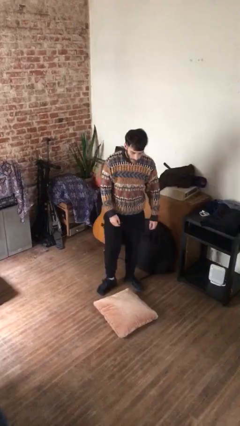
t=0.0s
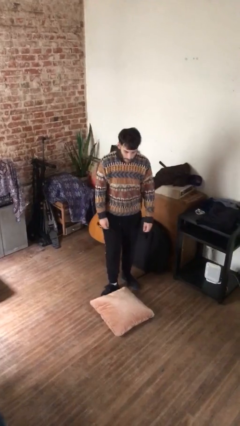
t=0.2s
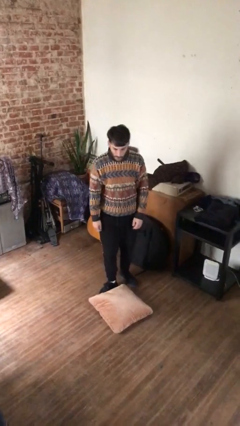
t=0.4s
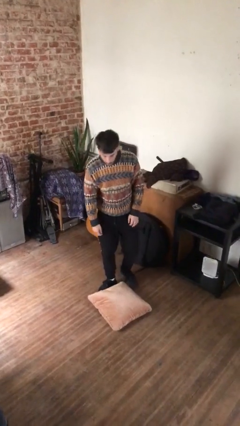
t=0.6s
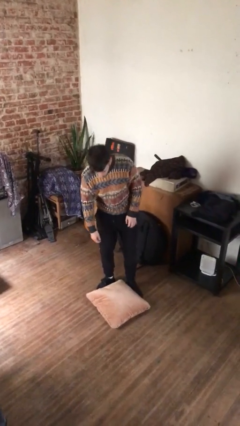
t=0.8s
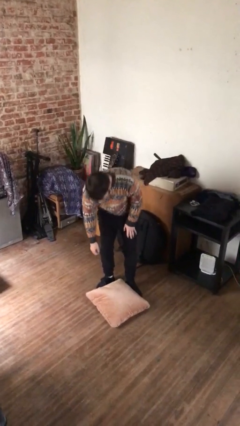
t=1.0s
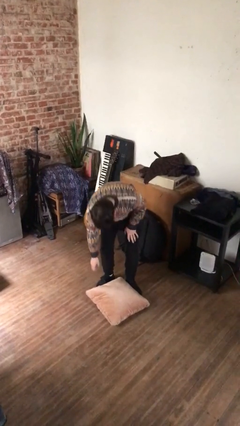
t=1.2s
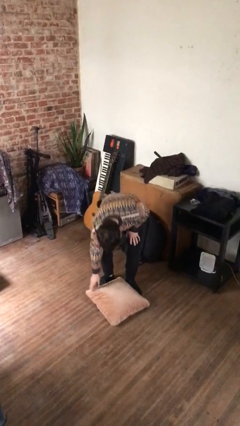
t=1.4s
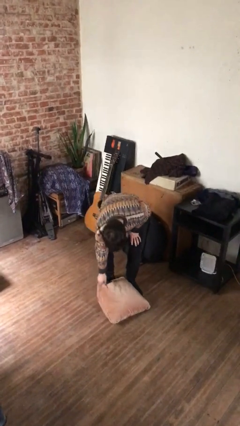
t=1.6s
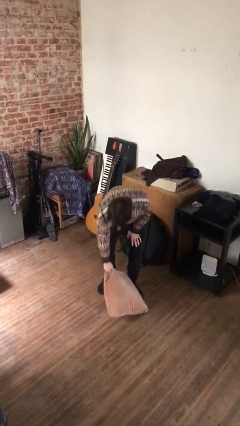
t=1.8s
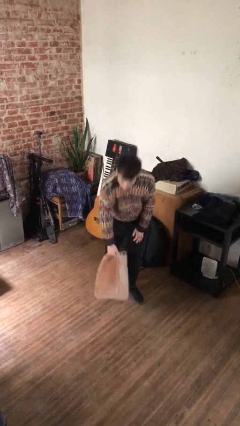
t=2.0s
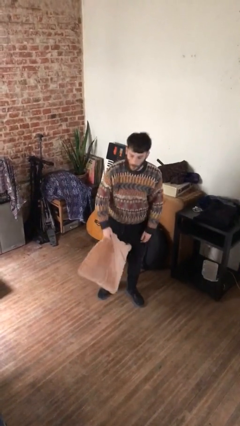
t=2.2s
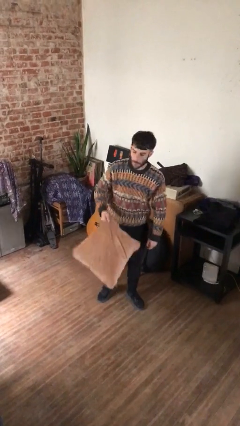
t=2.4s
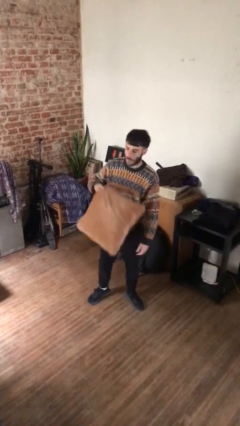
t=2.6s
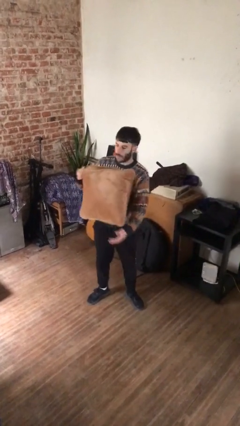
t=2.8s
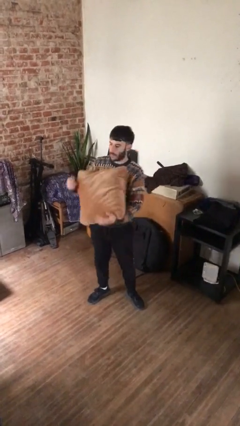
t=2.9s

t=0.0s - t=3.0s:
person picks up object from floor

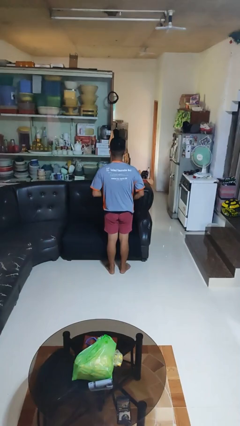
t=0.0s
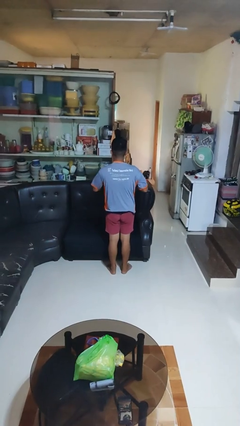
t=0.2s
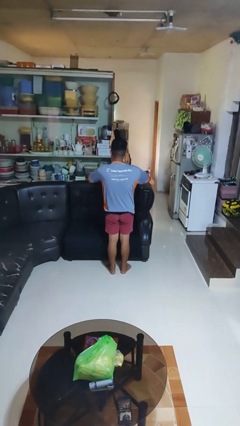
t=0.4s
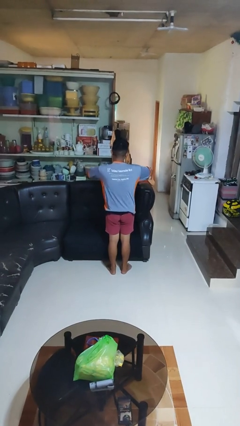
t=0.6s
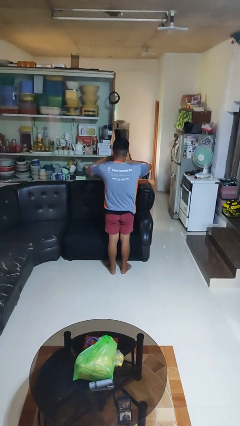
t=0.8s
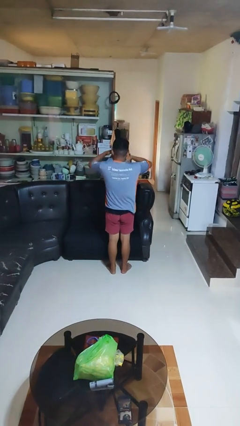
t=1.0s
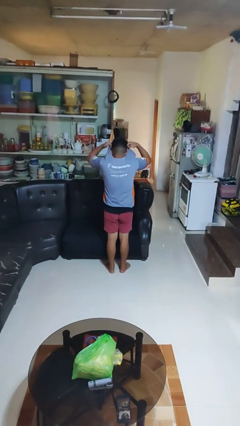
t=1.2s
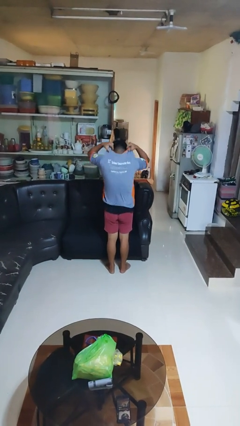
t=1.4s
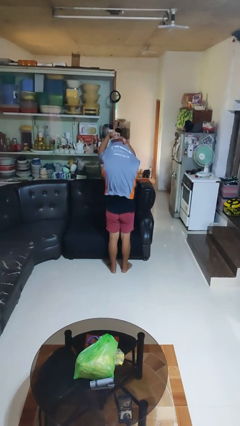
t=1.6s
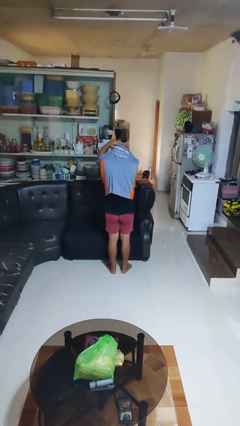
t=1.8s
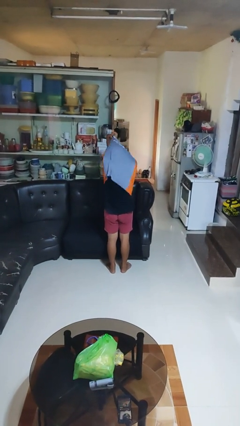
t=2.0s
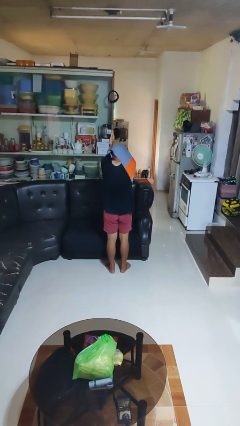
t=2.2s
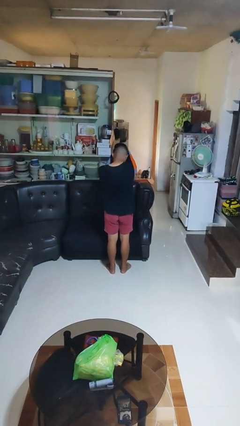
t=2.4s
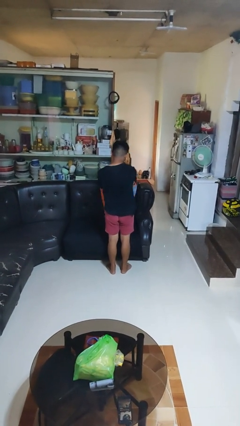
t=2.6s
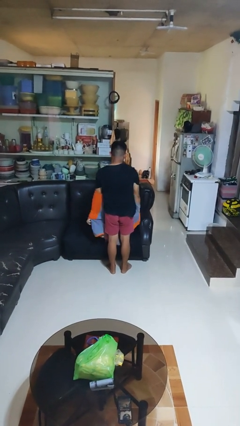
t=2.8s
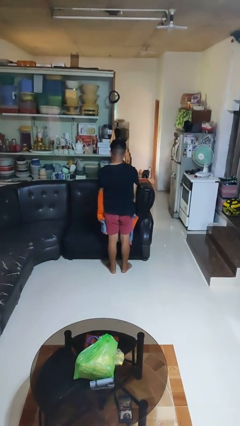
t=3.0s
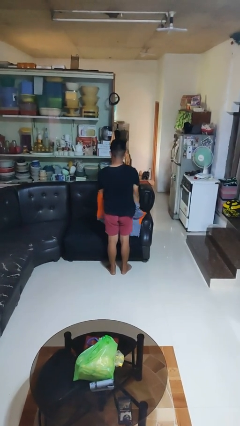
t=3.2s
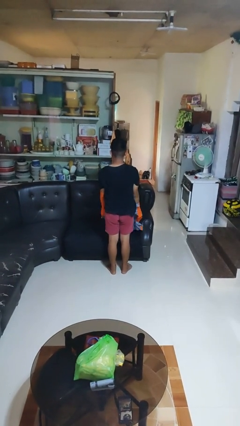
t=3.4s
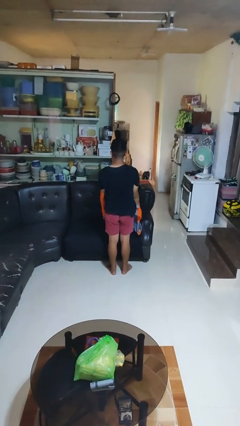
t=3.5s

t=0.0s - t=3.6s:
person takes off shirt

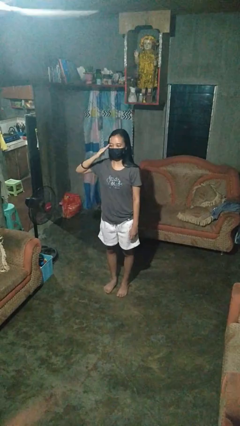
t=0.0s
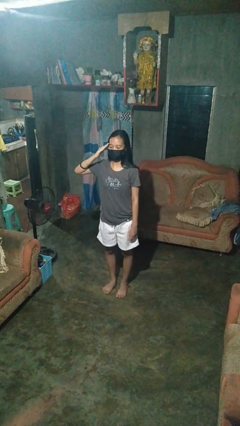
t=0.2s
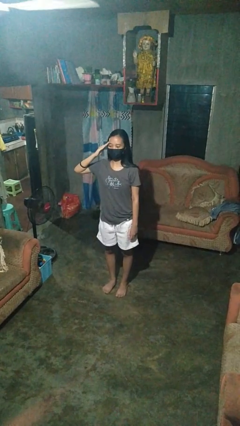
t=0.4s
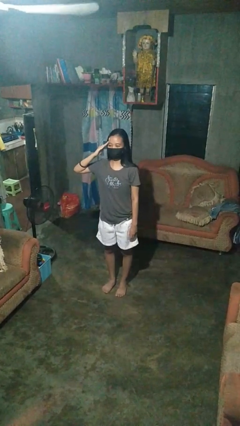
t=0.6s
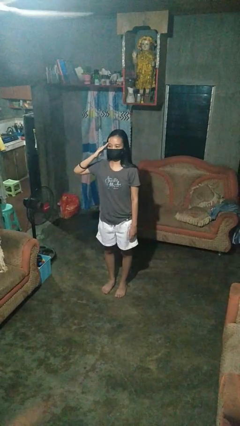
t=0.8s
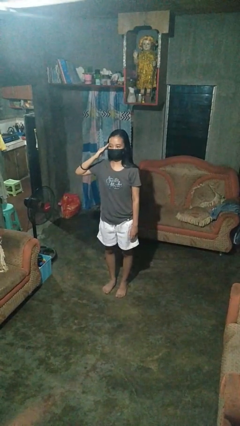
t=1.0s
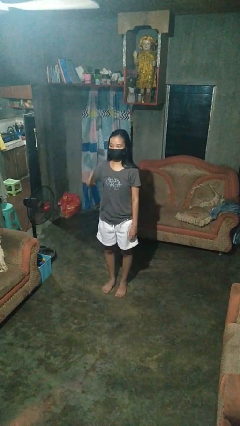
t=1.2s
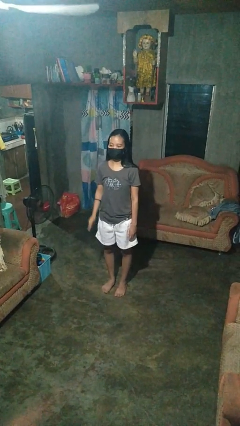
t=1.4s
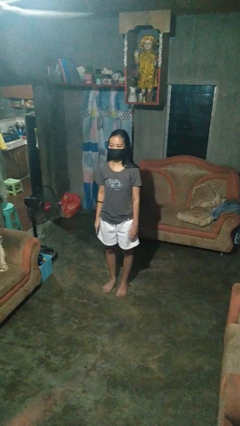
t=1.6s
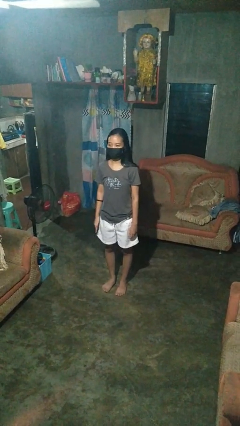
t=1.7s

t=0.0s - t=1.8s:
person salutes

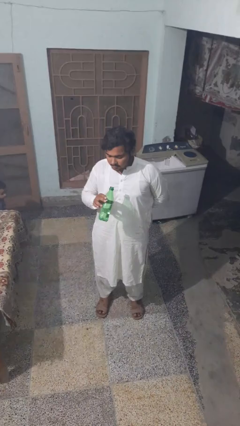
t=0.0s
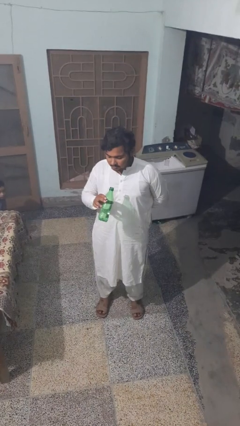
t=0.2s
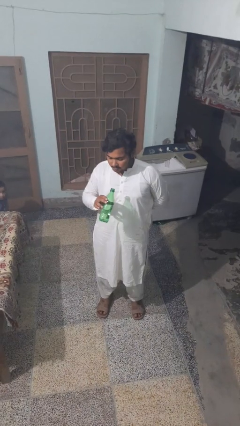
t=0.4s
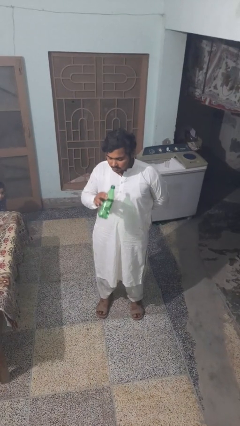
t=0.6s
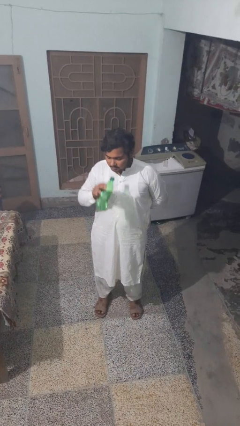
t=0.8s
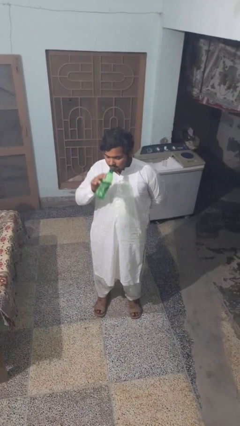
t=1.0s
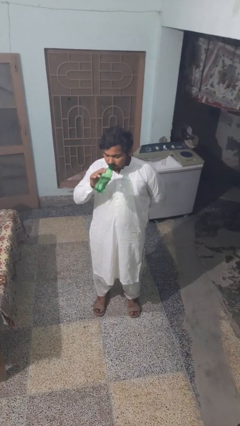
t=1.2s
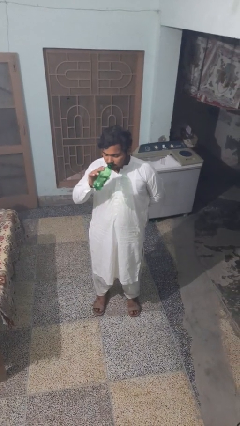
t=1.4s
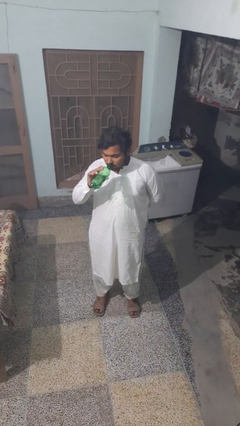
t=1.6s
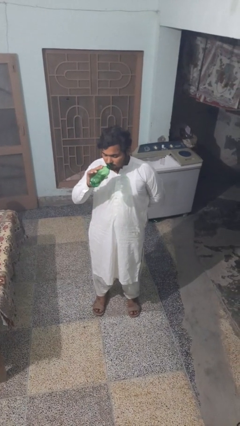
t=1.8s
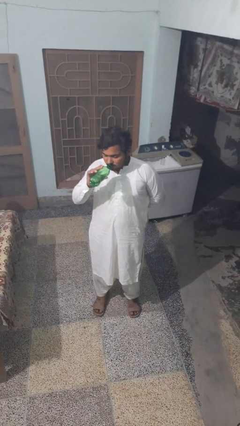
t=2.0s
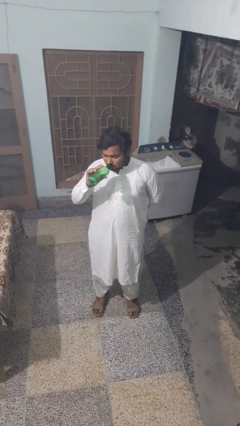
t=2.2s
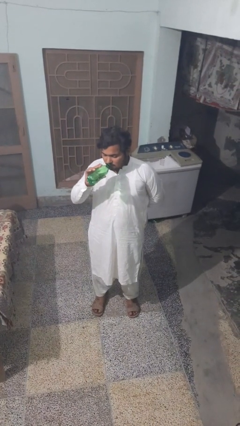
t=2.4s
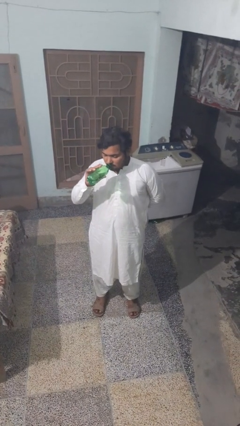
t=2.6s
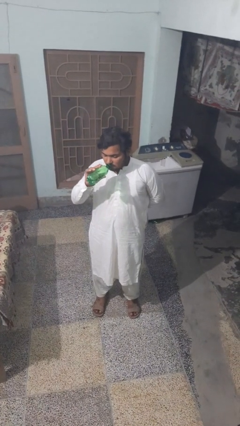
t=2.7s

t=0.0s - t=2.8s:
person drinks from bottle

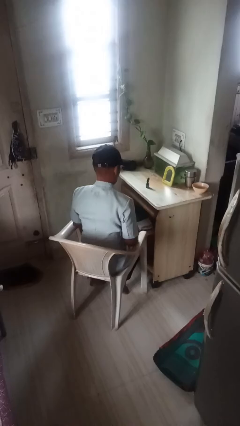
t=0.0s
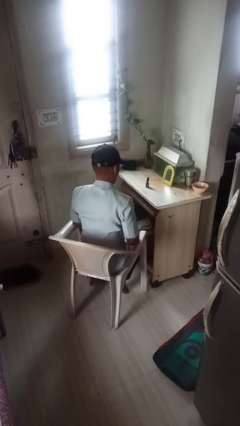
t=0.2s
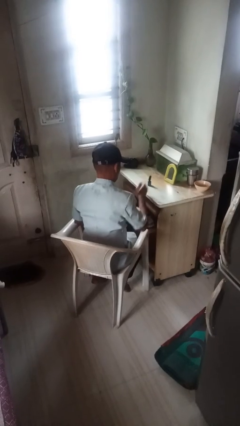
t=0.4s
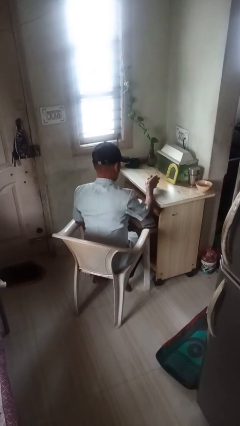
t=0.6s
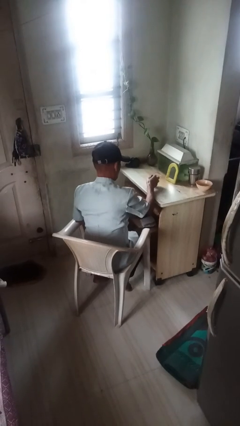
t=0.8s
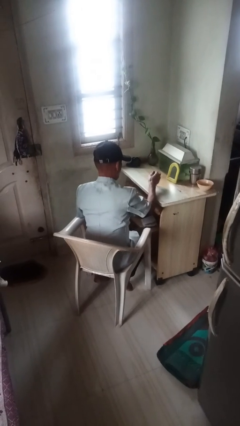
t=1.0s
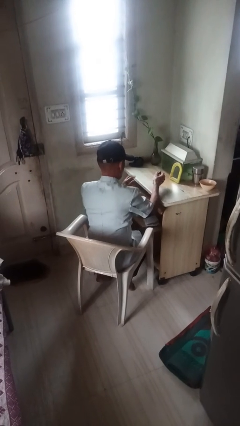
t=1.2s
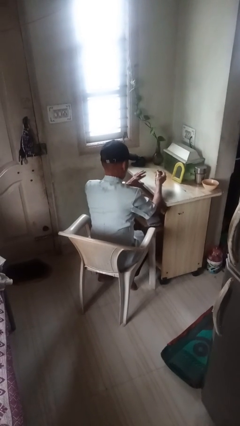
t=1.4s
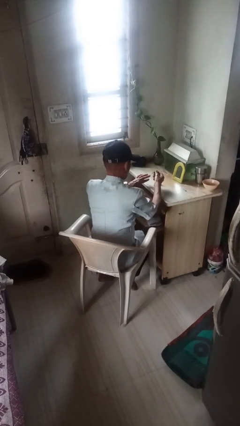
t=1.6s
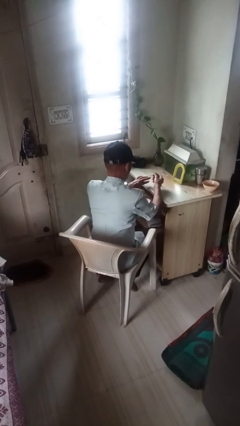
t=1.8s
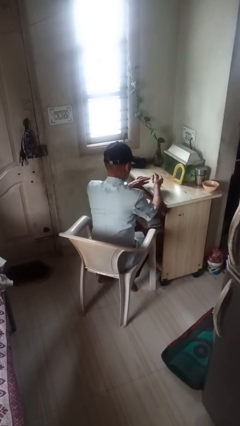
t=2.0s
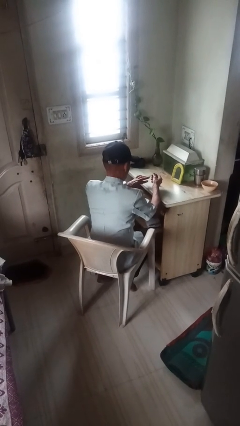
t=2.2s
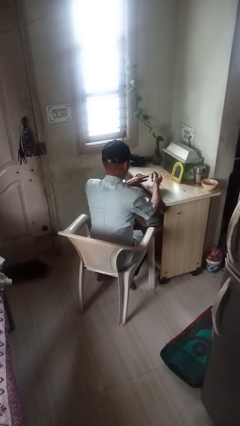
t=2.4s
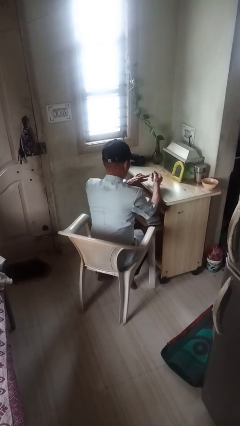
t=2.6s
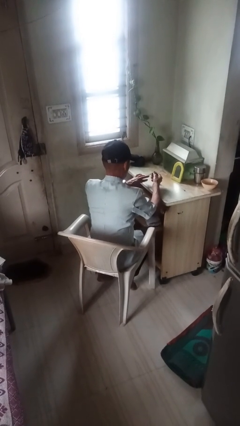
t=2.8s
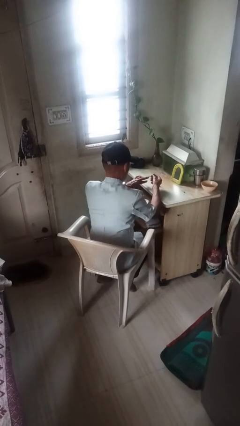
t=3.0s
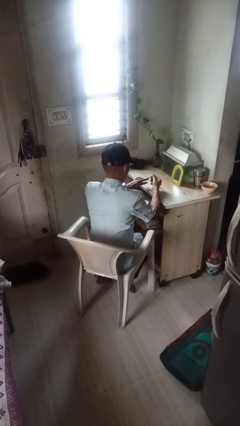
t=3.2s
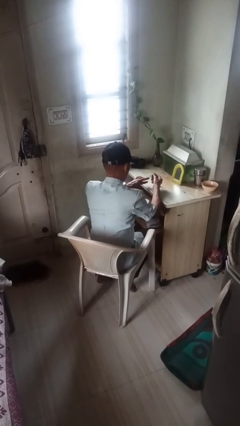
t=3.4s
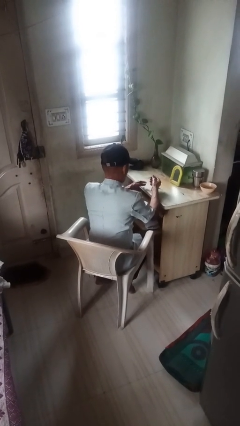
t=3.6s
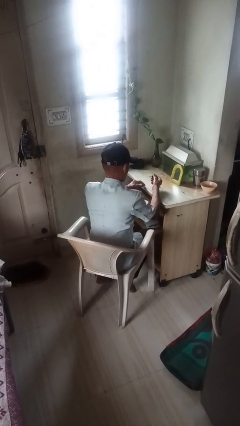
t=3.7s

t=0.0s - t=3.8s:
person paints fingernails

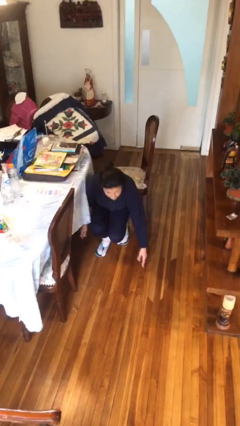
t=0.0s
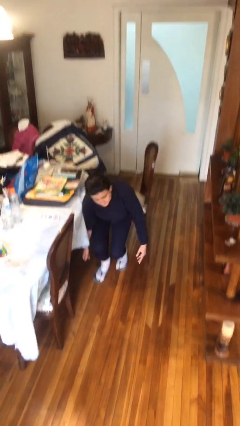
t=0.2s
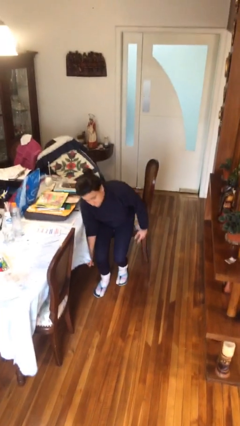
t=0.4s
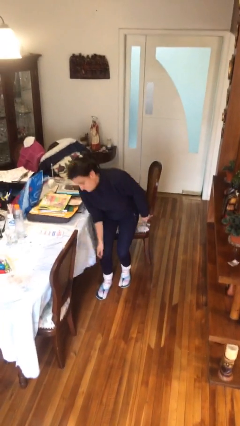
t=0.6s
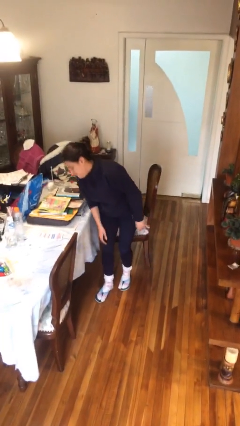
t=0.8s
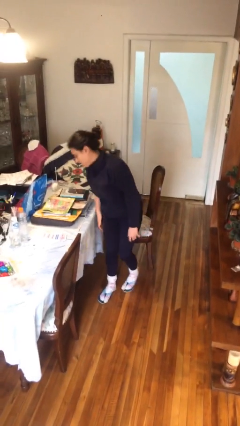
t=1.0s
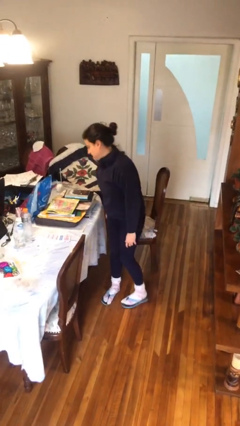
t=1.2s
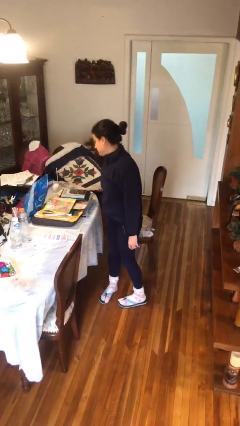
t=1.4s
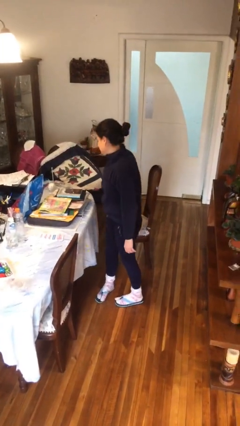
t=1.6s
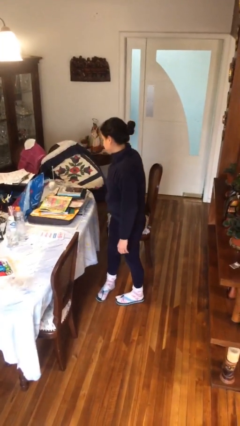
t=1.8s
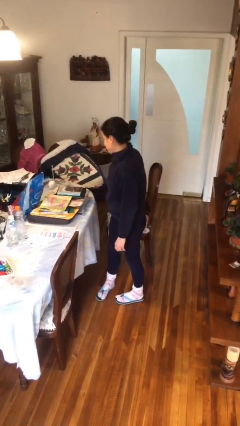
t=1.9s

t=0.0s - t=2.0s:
person stands up from floor
